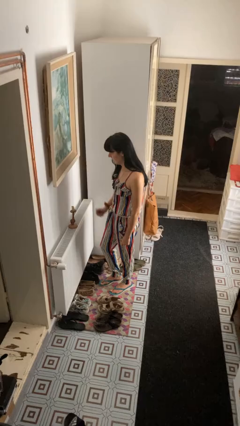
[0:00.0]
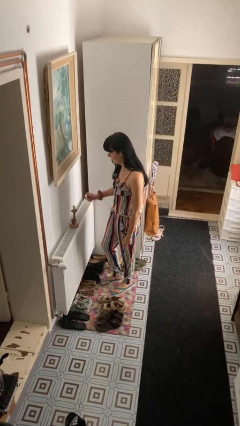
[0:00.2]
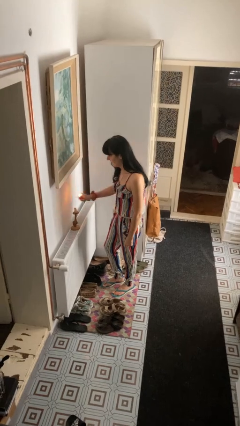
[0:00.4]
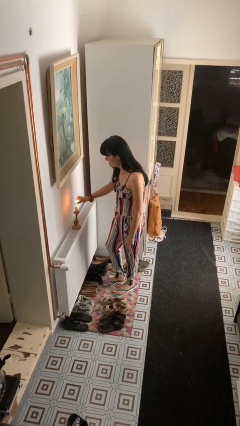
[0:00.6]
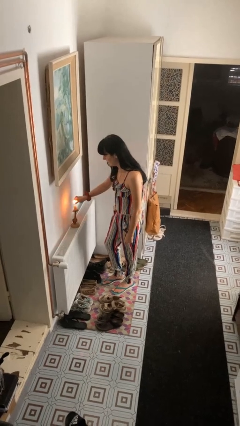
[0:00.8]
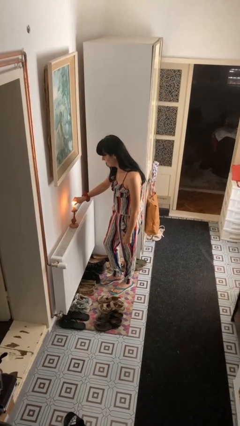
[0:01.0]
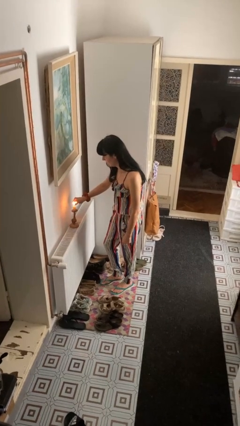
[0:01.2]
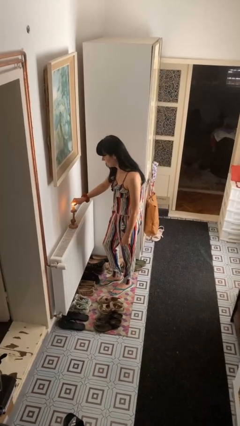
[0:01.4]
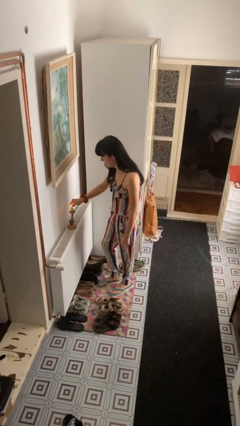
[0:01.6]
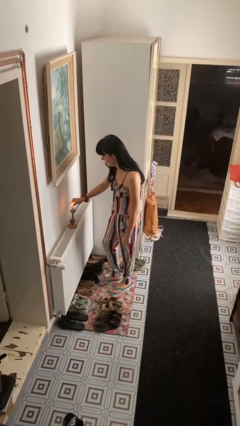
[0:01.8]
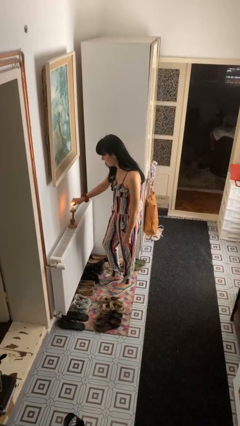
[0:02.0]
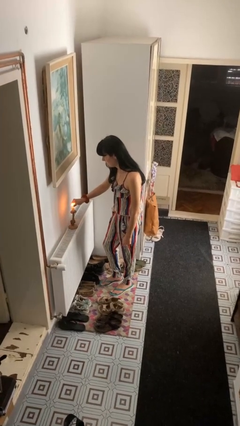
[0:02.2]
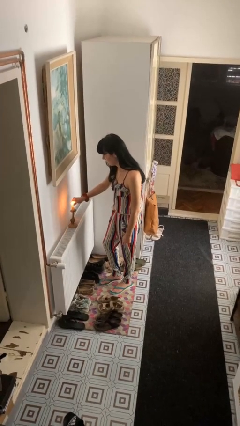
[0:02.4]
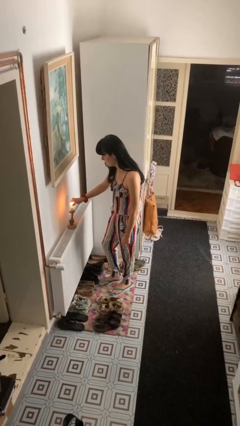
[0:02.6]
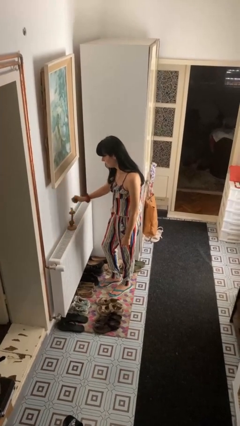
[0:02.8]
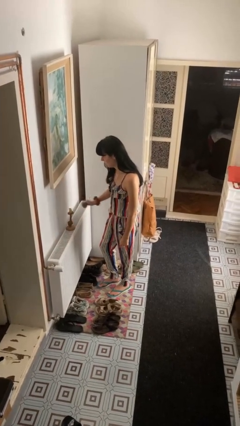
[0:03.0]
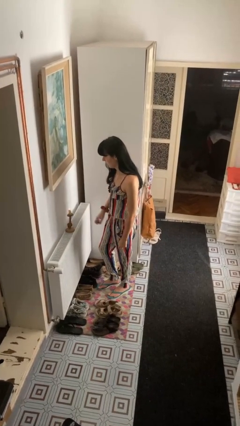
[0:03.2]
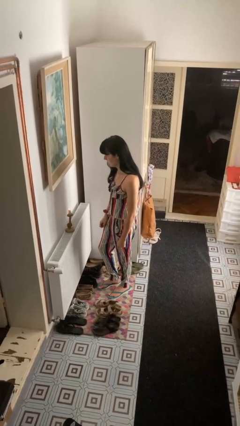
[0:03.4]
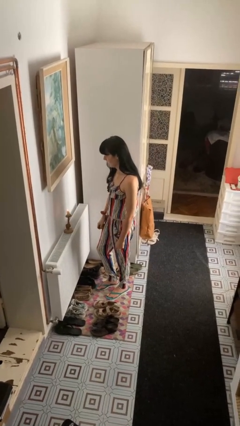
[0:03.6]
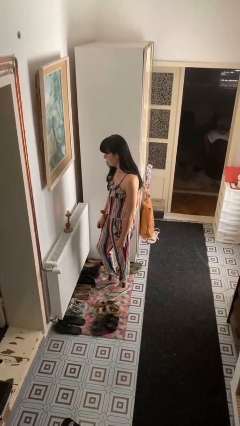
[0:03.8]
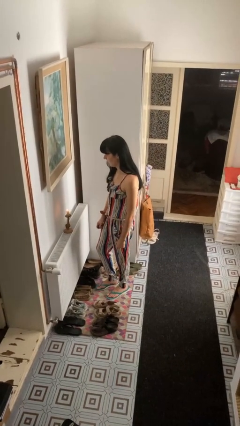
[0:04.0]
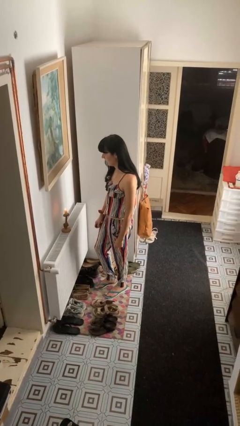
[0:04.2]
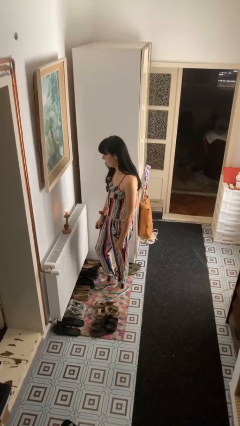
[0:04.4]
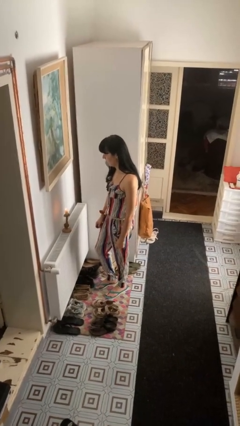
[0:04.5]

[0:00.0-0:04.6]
person lights candle

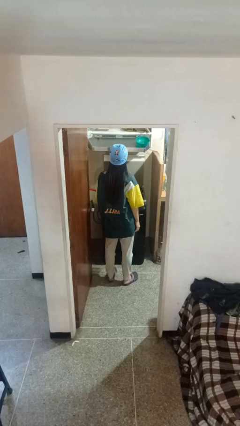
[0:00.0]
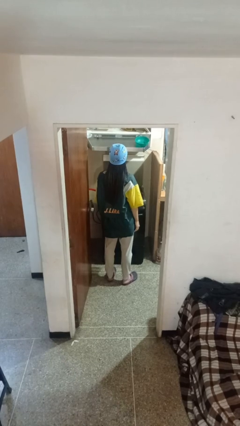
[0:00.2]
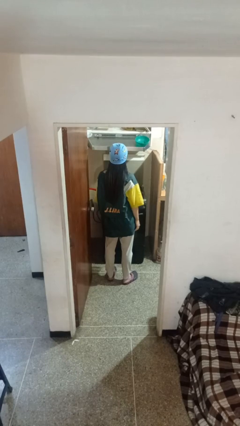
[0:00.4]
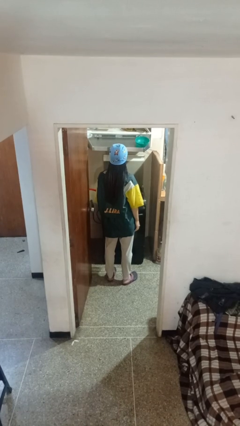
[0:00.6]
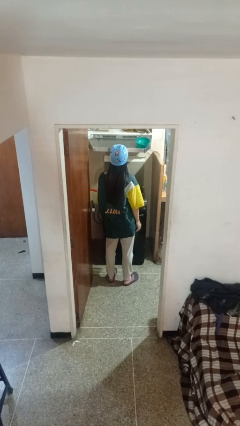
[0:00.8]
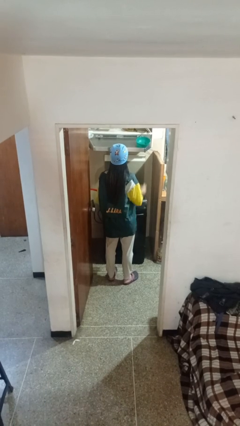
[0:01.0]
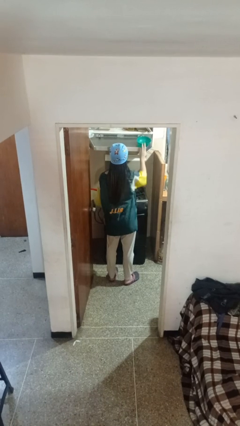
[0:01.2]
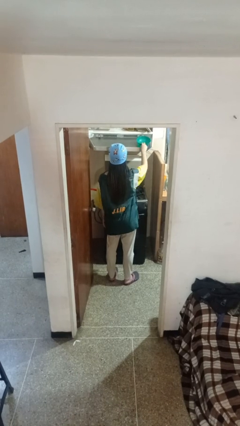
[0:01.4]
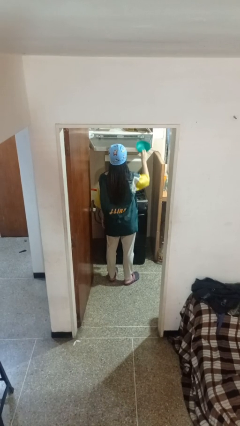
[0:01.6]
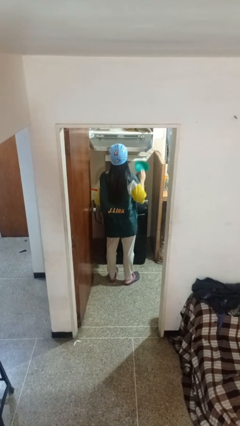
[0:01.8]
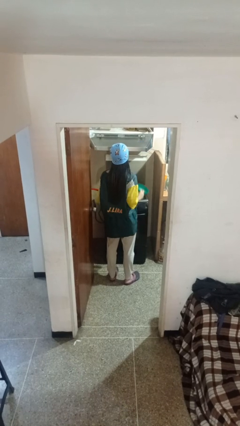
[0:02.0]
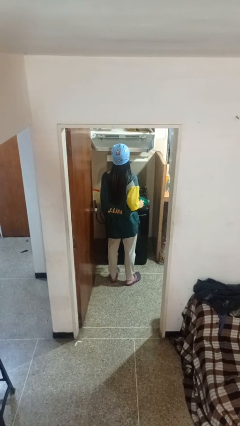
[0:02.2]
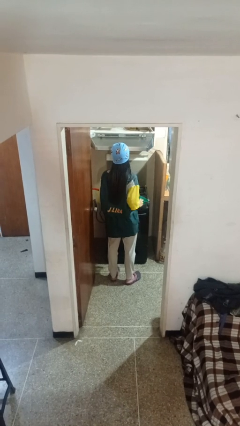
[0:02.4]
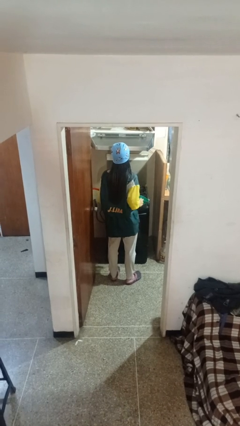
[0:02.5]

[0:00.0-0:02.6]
person picks up object from countertop

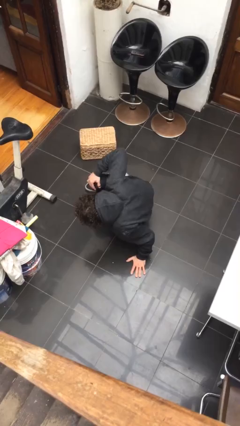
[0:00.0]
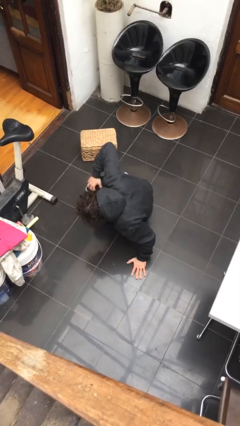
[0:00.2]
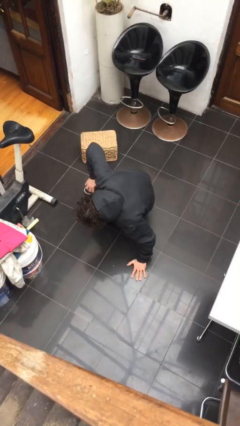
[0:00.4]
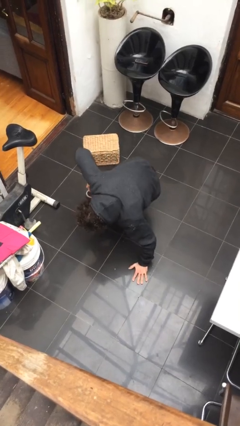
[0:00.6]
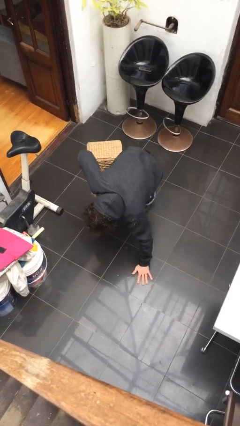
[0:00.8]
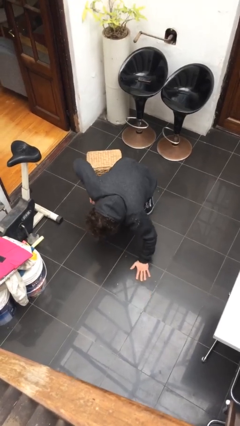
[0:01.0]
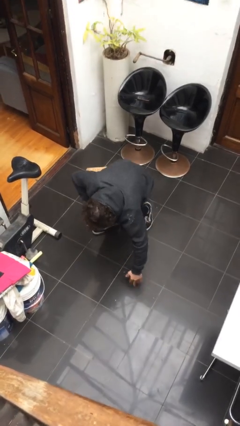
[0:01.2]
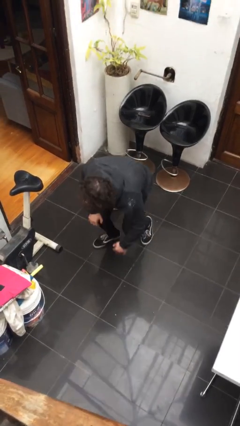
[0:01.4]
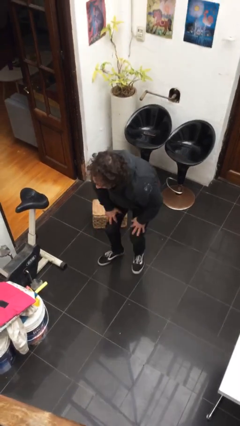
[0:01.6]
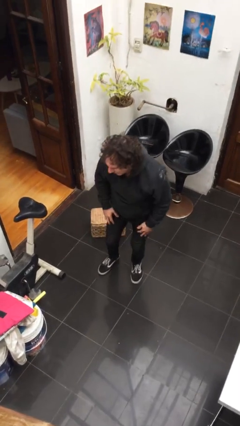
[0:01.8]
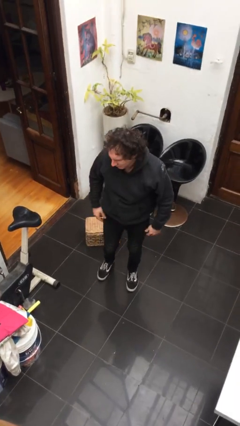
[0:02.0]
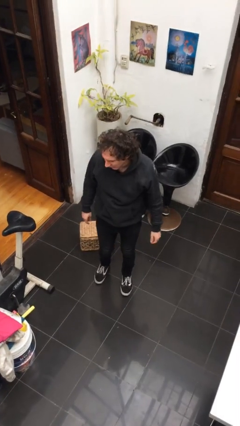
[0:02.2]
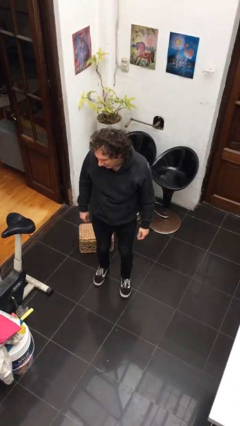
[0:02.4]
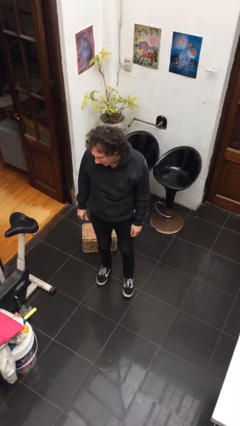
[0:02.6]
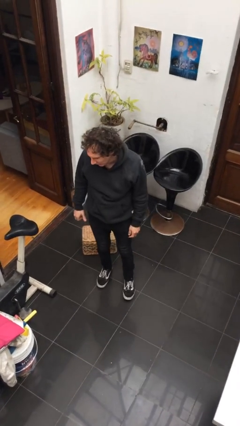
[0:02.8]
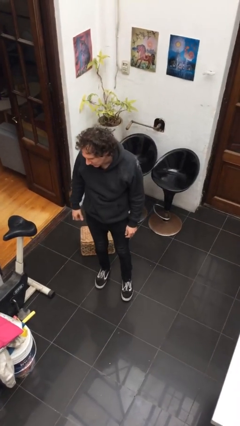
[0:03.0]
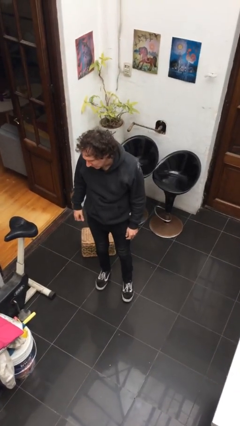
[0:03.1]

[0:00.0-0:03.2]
person stands up from floor

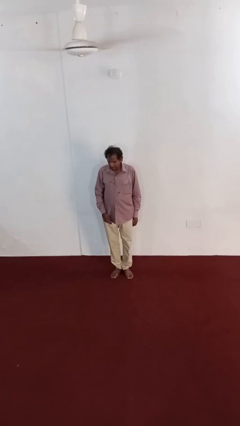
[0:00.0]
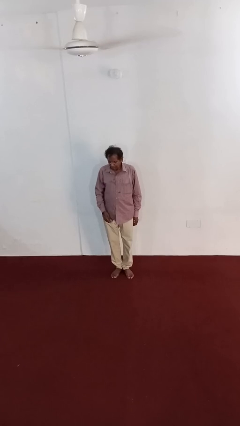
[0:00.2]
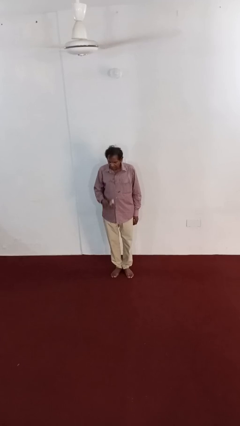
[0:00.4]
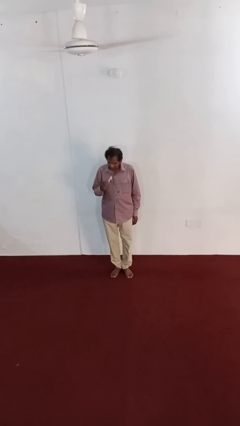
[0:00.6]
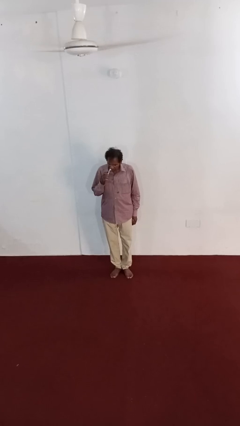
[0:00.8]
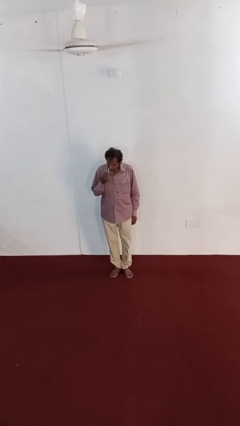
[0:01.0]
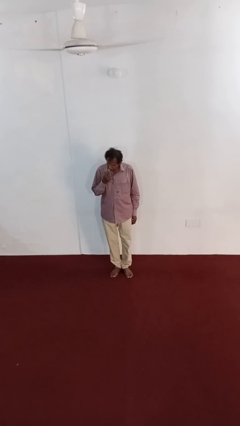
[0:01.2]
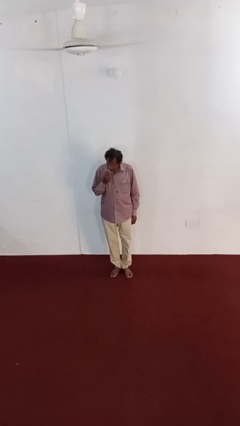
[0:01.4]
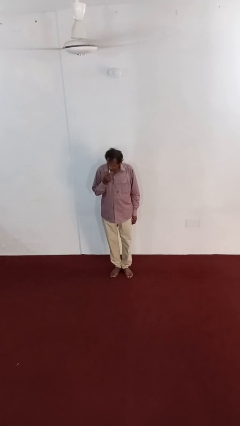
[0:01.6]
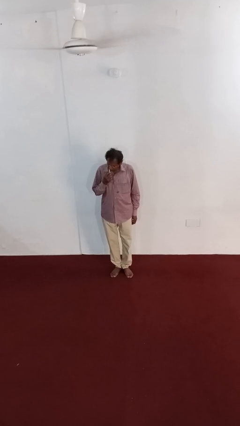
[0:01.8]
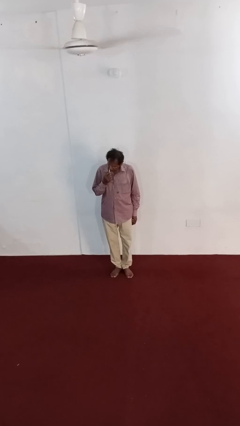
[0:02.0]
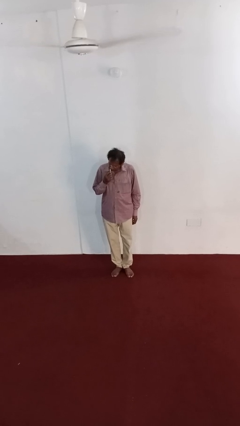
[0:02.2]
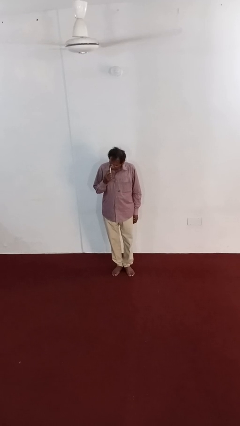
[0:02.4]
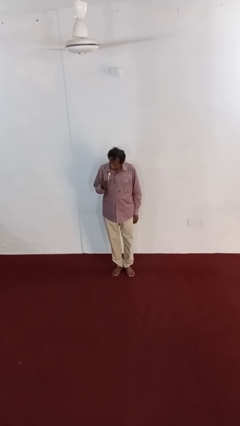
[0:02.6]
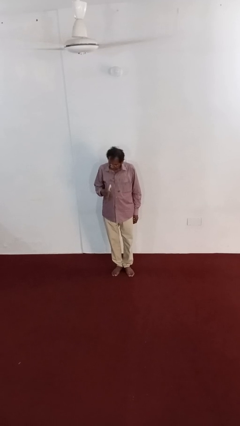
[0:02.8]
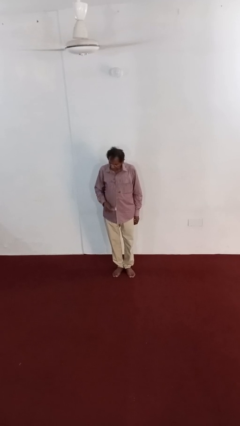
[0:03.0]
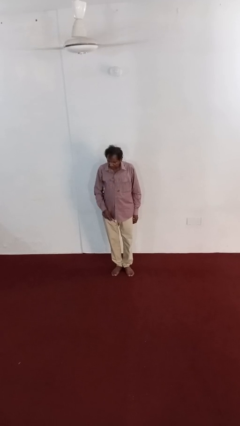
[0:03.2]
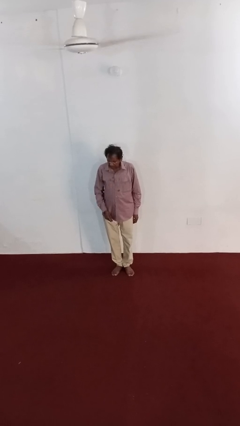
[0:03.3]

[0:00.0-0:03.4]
person brushes teeth

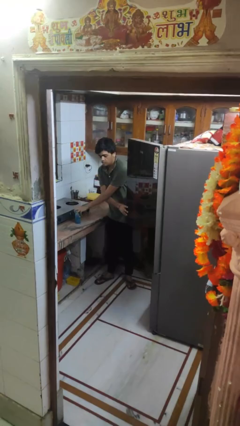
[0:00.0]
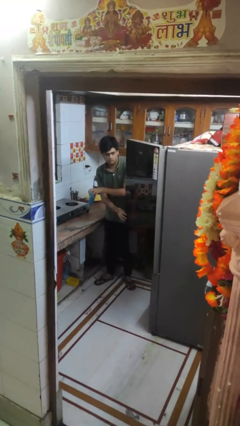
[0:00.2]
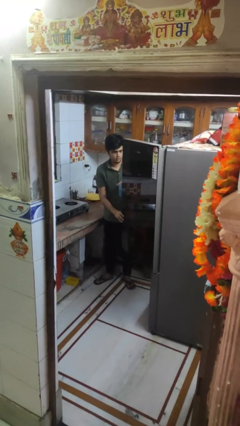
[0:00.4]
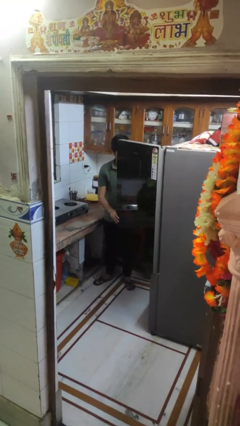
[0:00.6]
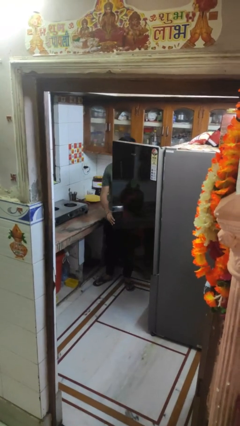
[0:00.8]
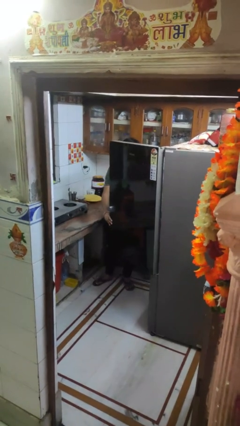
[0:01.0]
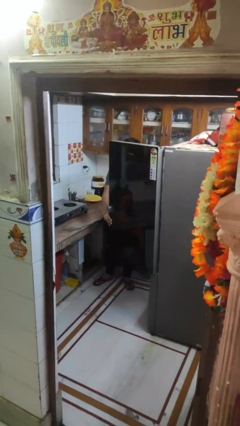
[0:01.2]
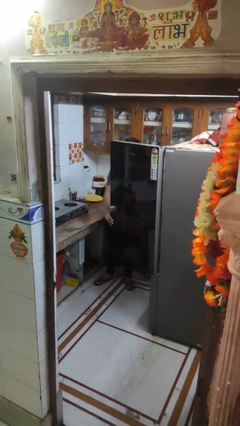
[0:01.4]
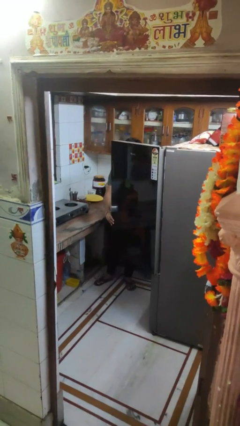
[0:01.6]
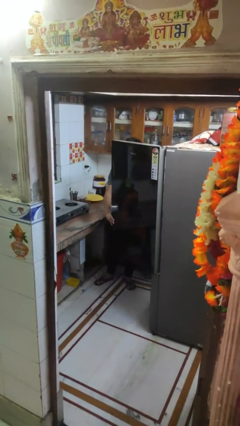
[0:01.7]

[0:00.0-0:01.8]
person puts object into refrigerator

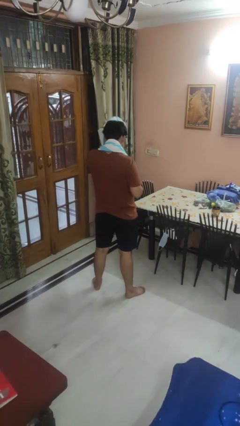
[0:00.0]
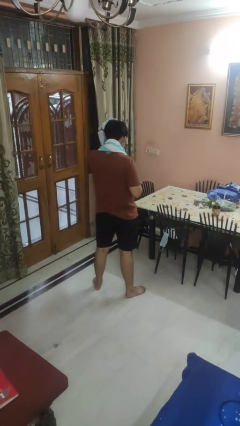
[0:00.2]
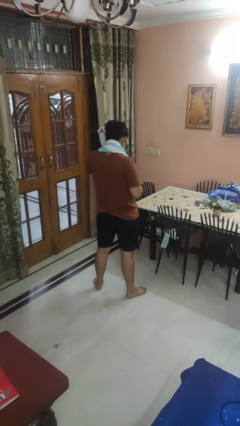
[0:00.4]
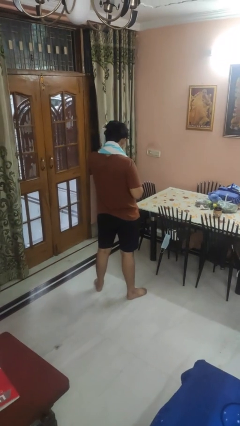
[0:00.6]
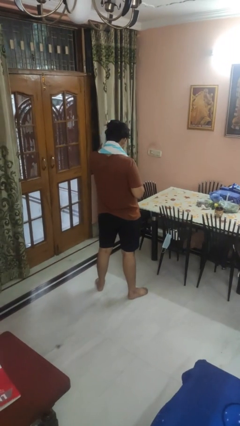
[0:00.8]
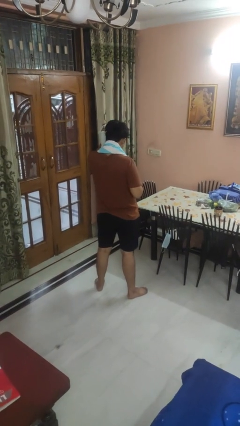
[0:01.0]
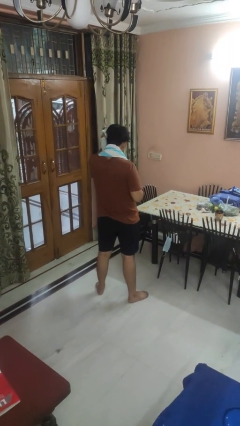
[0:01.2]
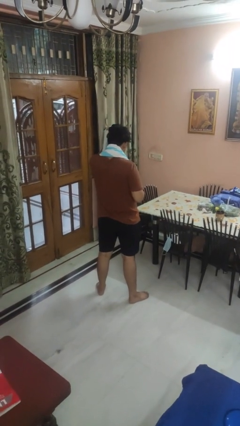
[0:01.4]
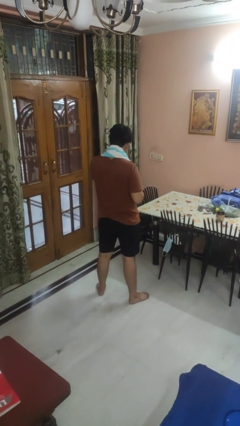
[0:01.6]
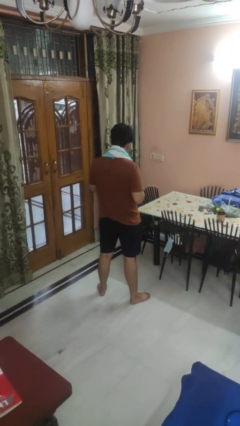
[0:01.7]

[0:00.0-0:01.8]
person dries hair with towel
